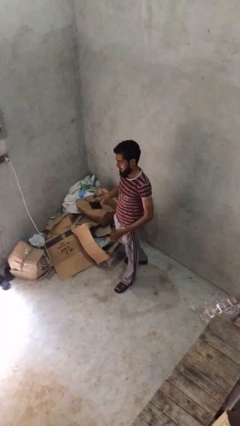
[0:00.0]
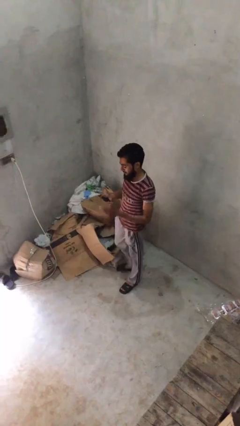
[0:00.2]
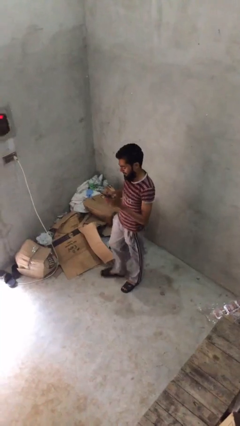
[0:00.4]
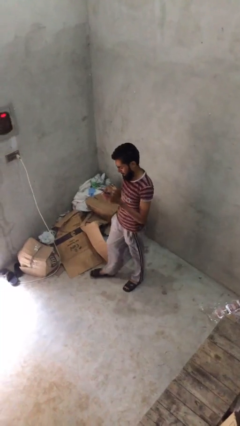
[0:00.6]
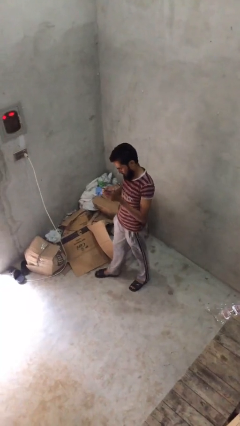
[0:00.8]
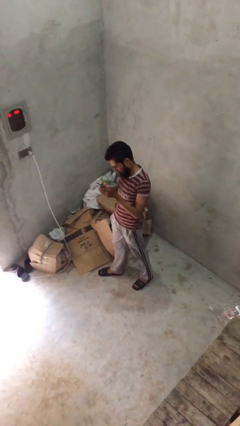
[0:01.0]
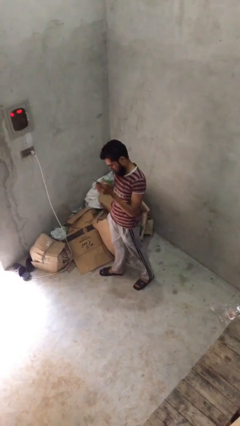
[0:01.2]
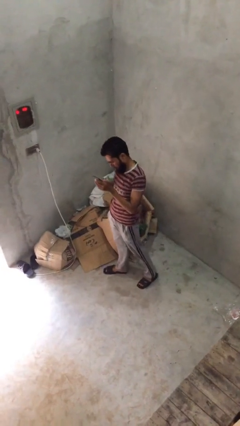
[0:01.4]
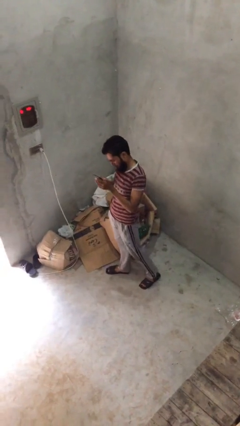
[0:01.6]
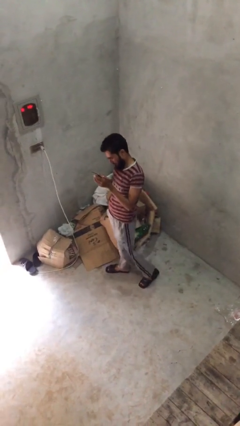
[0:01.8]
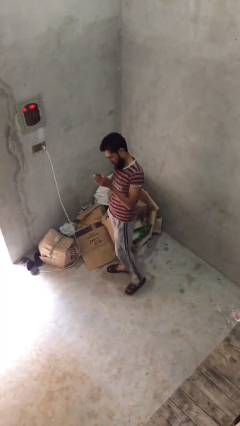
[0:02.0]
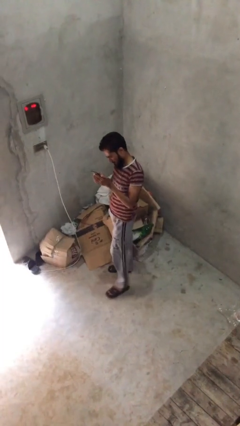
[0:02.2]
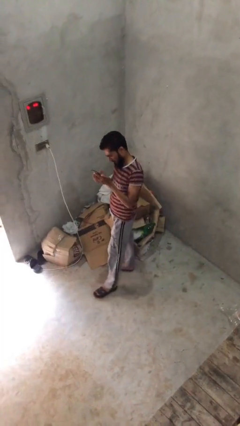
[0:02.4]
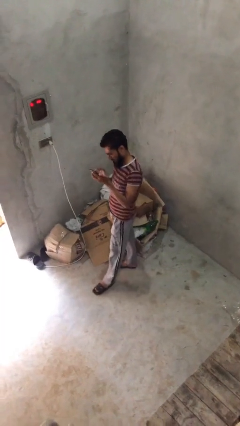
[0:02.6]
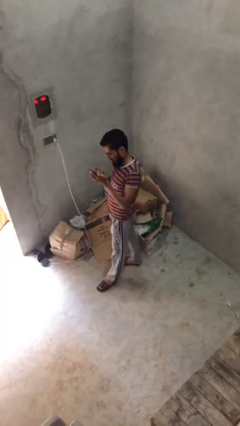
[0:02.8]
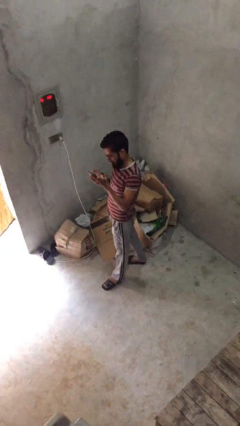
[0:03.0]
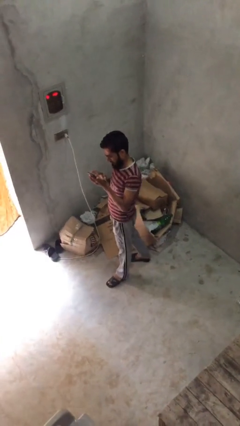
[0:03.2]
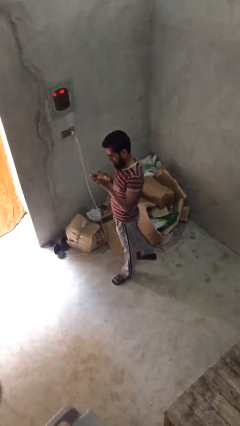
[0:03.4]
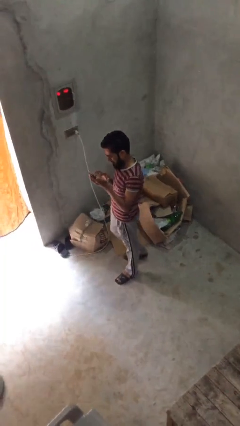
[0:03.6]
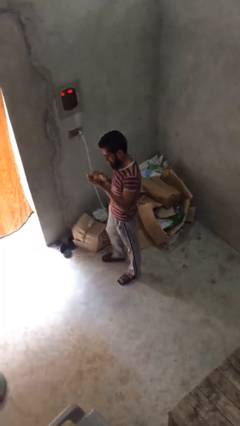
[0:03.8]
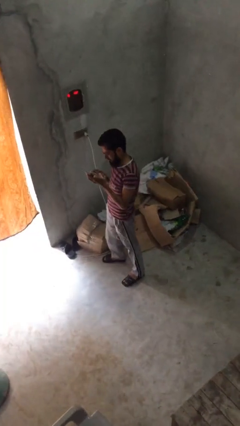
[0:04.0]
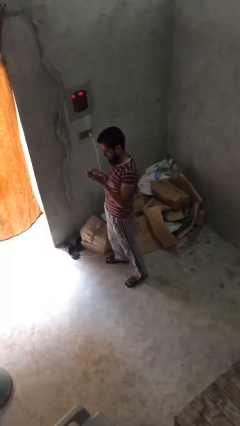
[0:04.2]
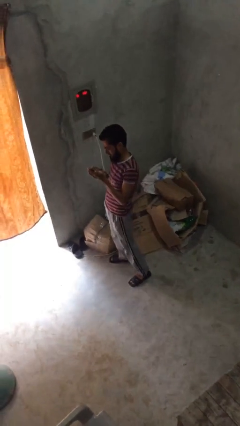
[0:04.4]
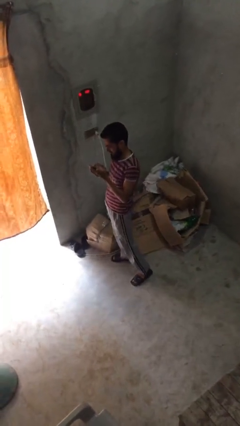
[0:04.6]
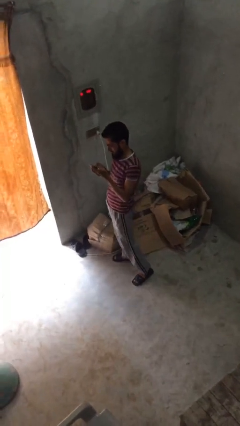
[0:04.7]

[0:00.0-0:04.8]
person texts on phone

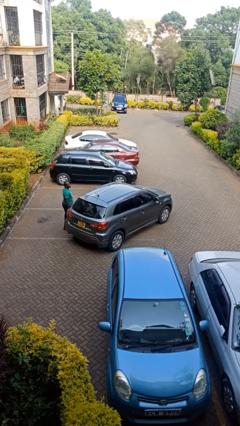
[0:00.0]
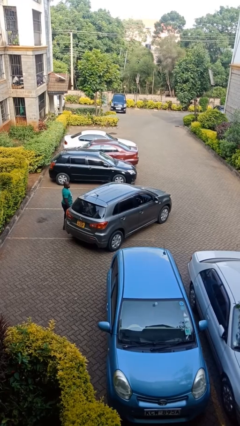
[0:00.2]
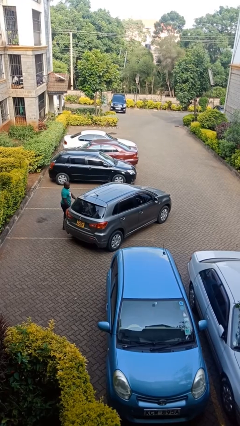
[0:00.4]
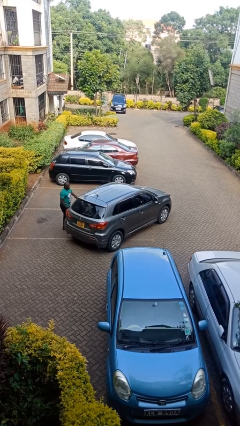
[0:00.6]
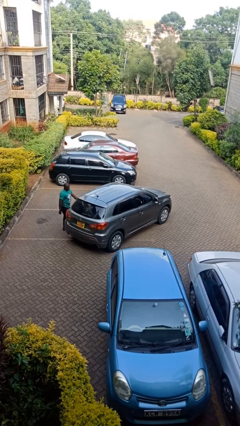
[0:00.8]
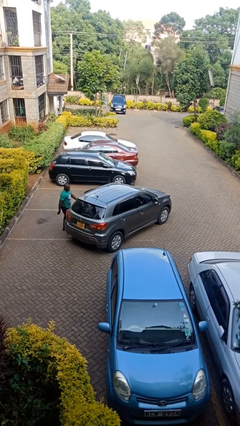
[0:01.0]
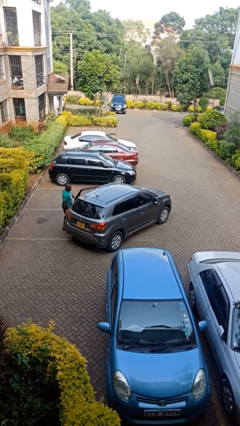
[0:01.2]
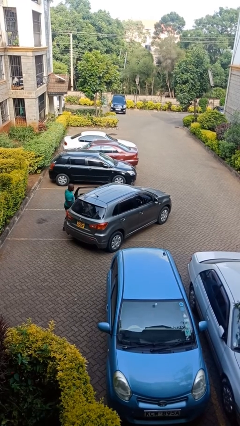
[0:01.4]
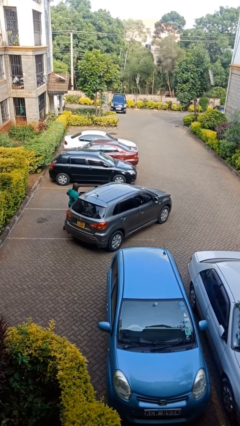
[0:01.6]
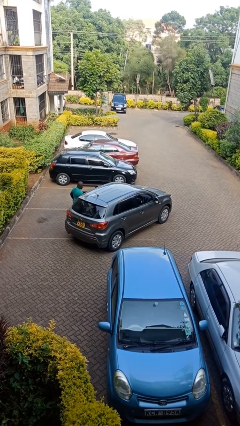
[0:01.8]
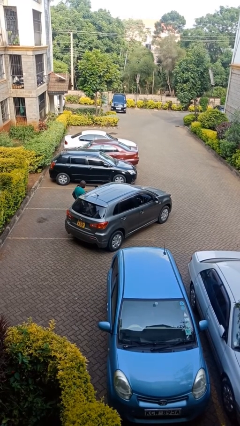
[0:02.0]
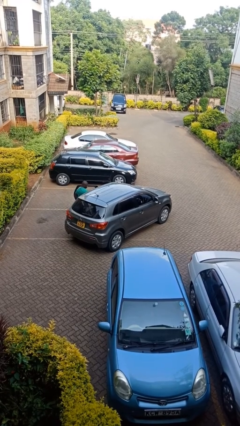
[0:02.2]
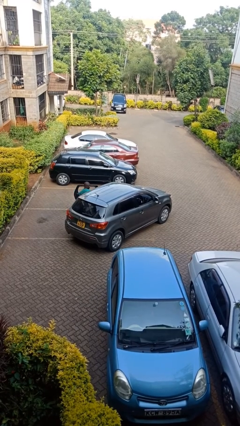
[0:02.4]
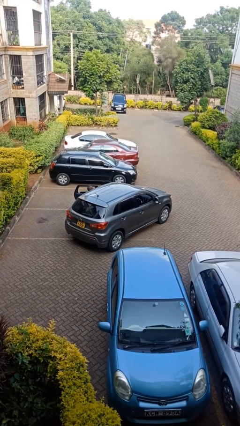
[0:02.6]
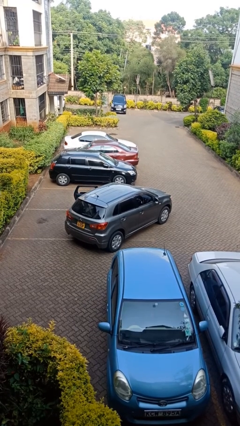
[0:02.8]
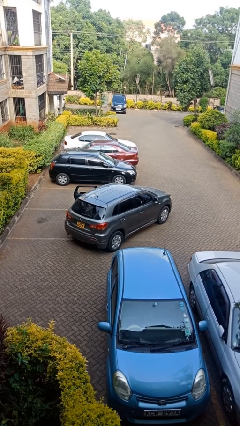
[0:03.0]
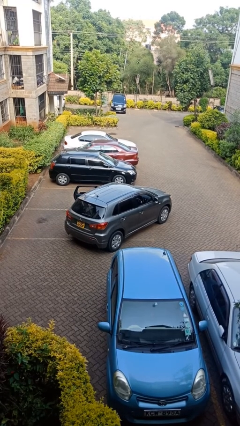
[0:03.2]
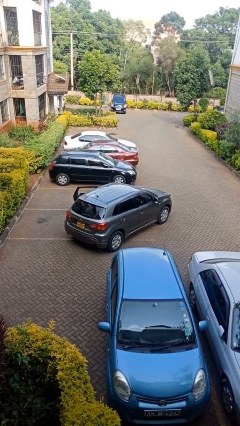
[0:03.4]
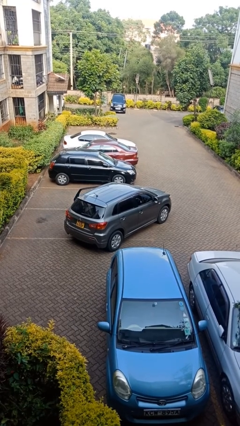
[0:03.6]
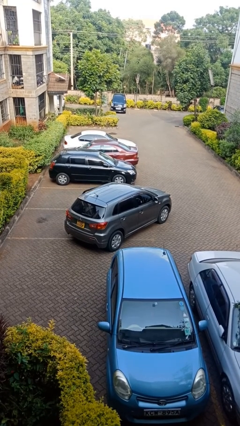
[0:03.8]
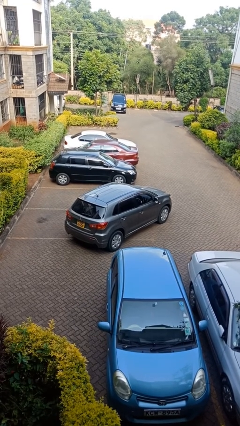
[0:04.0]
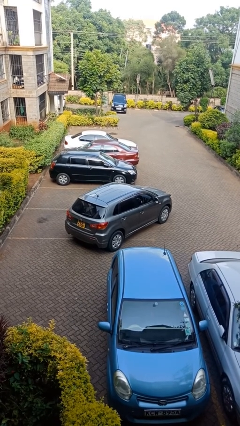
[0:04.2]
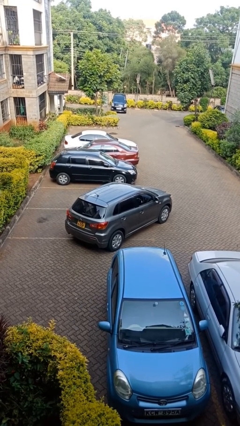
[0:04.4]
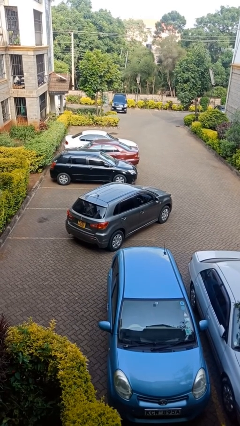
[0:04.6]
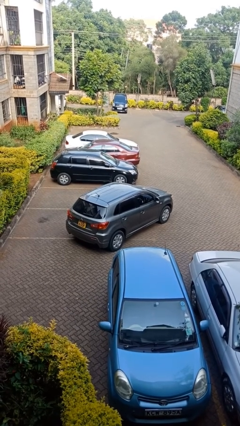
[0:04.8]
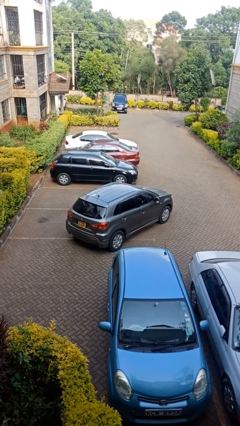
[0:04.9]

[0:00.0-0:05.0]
car picks up person

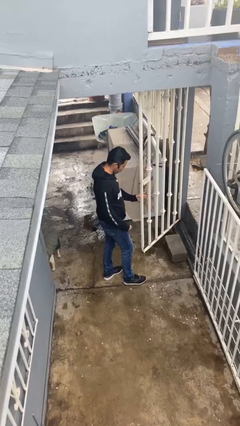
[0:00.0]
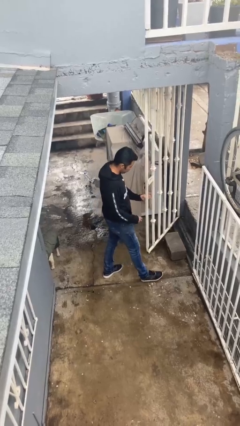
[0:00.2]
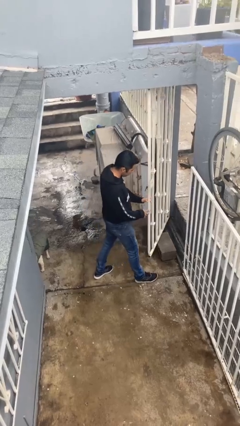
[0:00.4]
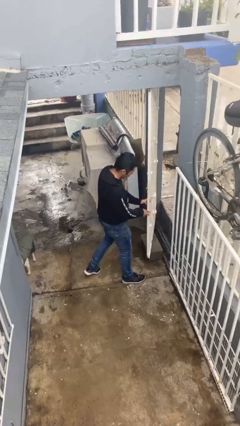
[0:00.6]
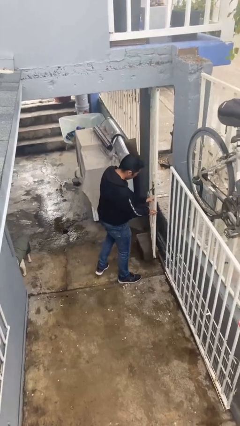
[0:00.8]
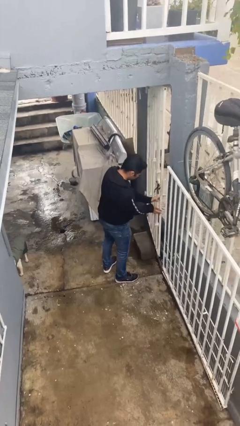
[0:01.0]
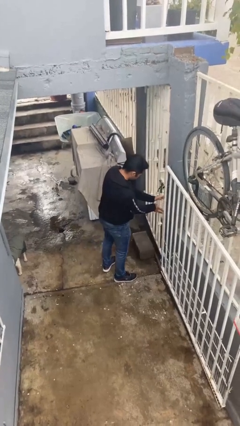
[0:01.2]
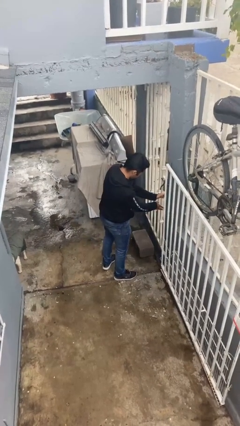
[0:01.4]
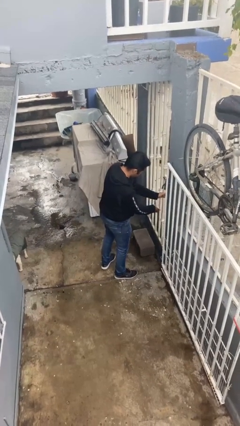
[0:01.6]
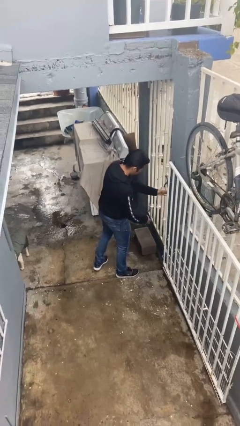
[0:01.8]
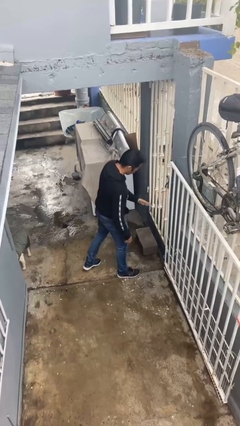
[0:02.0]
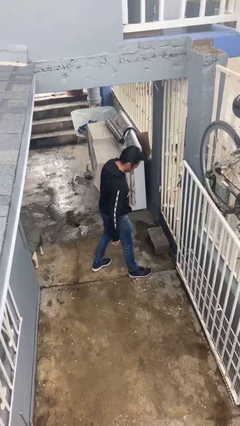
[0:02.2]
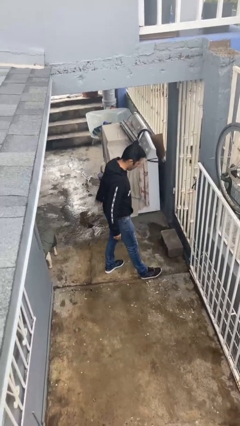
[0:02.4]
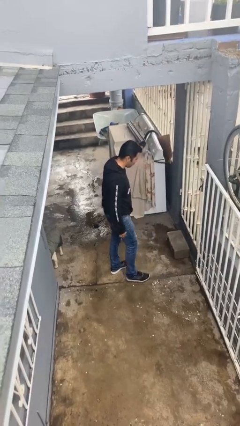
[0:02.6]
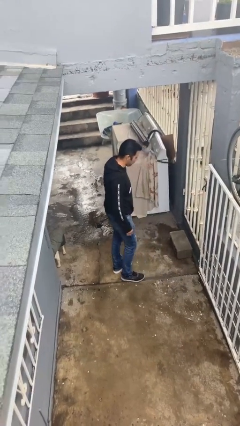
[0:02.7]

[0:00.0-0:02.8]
person closes facility door

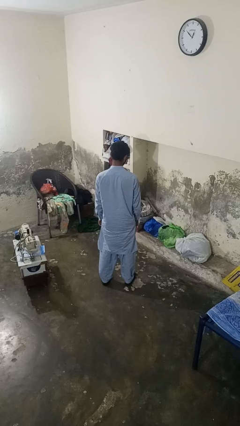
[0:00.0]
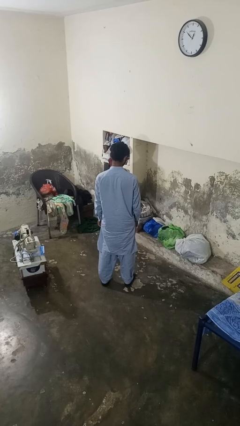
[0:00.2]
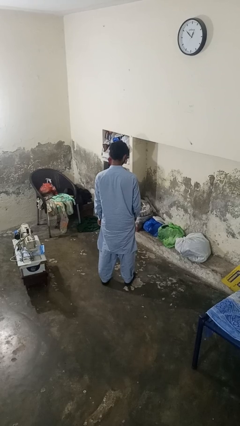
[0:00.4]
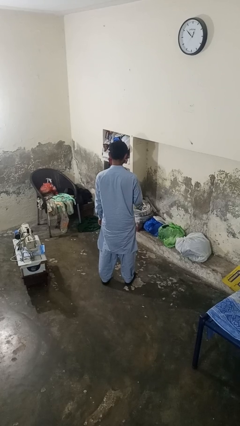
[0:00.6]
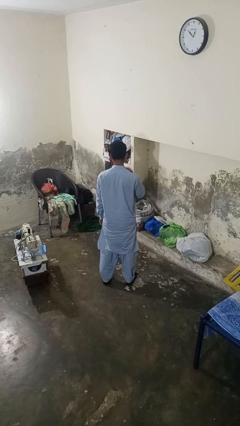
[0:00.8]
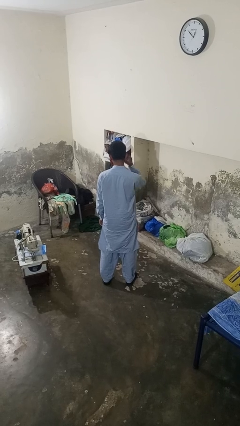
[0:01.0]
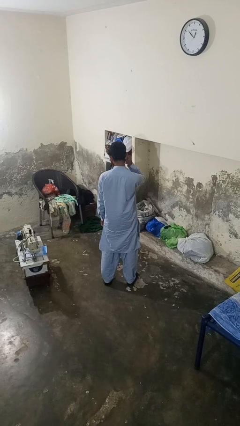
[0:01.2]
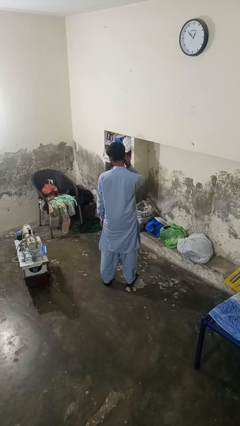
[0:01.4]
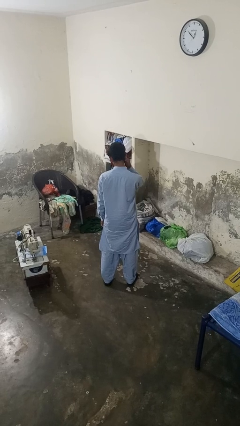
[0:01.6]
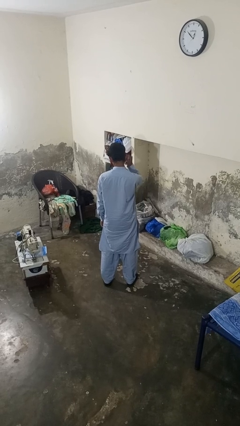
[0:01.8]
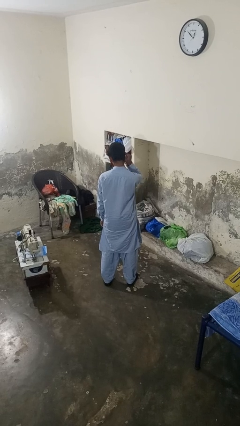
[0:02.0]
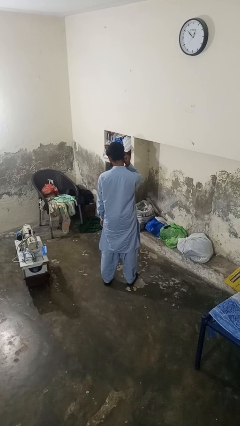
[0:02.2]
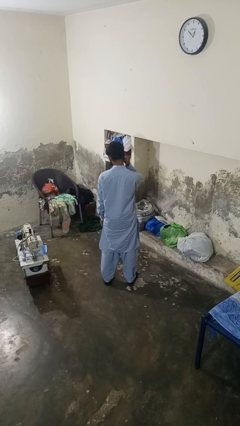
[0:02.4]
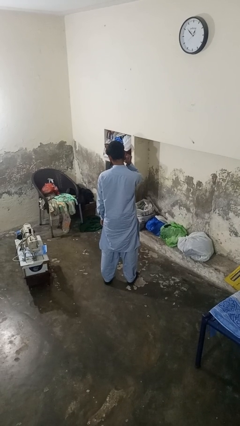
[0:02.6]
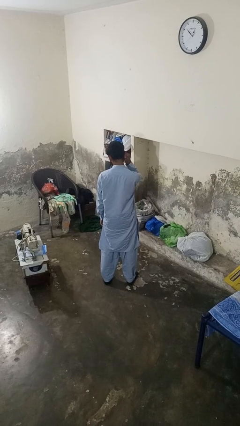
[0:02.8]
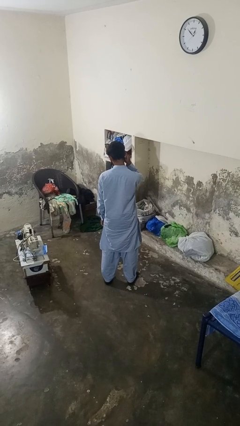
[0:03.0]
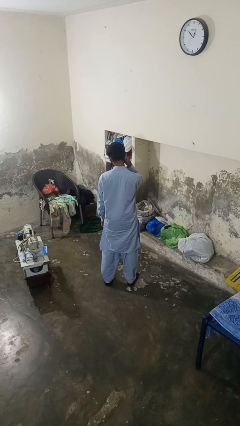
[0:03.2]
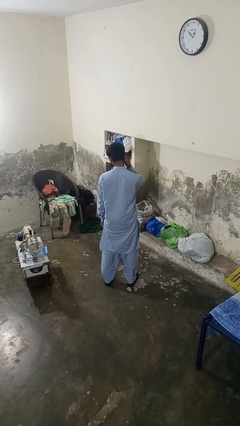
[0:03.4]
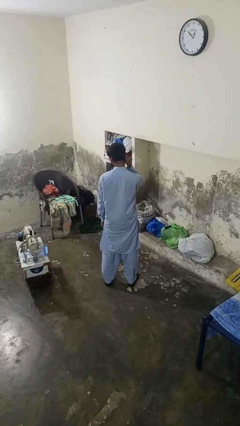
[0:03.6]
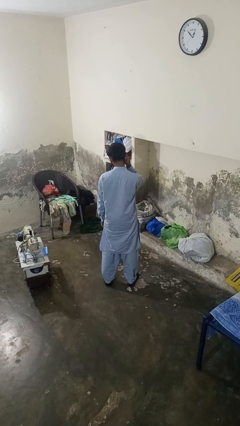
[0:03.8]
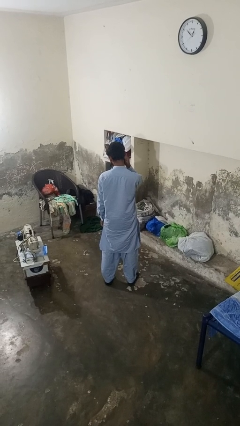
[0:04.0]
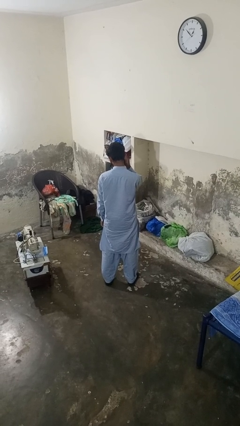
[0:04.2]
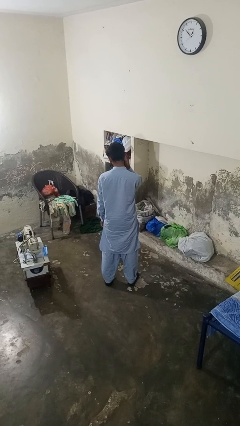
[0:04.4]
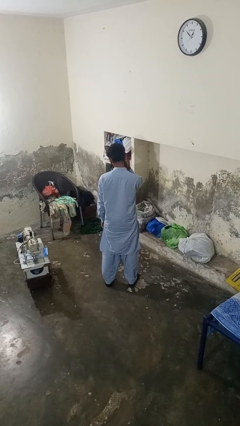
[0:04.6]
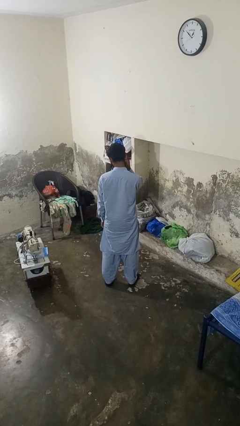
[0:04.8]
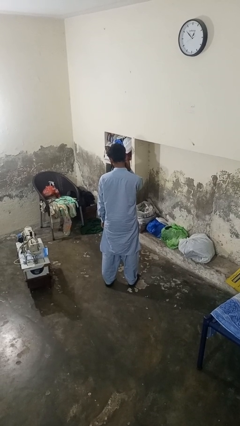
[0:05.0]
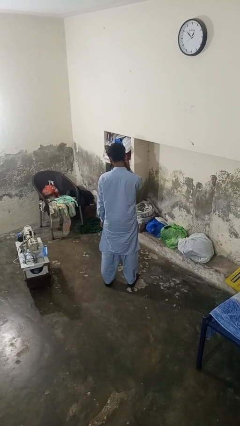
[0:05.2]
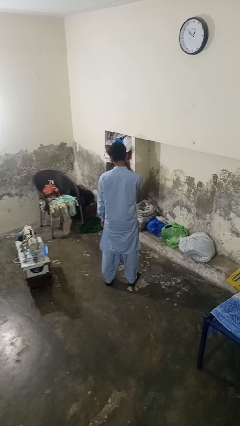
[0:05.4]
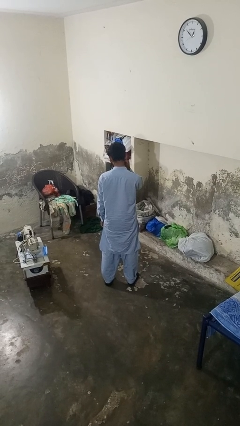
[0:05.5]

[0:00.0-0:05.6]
person touches earlobe
